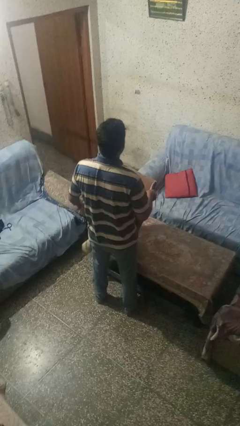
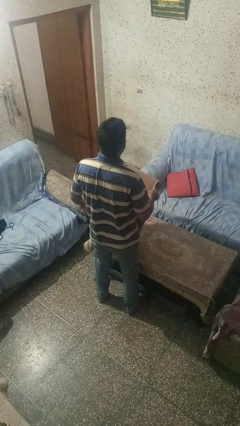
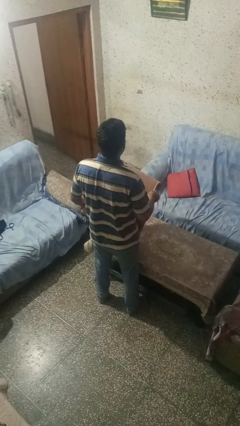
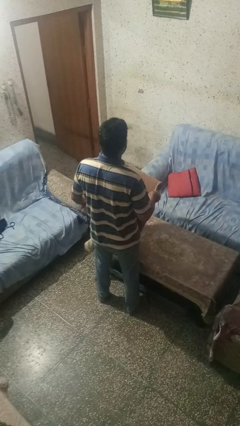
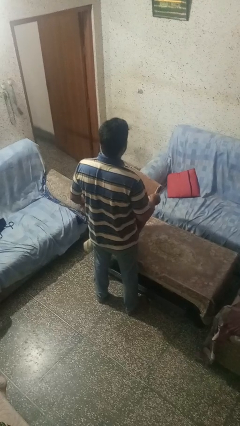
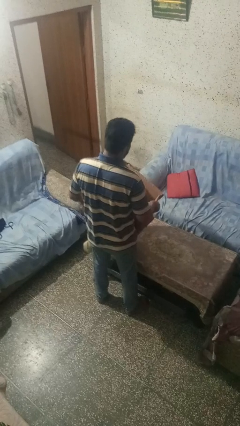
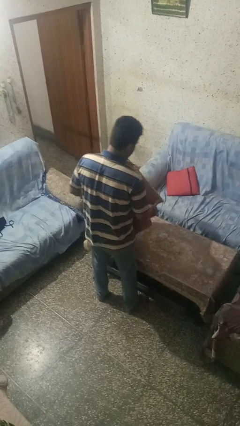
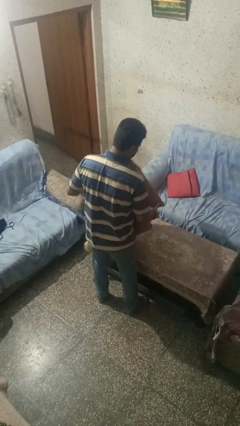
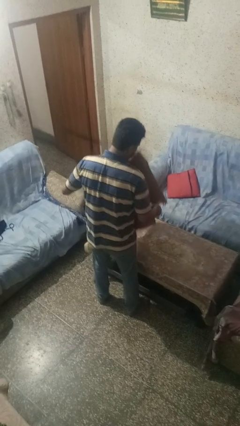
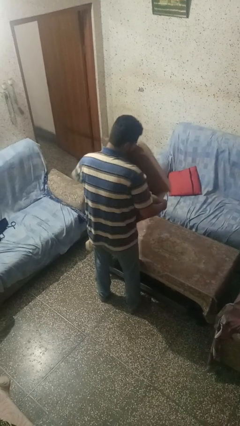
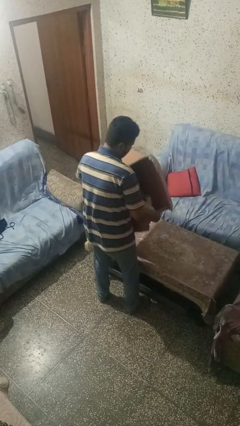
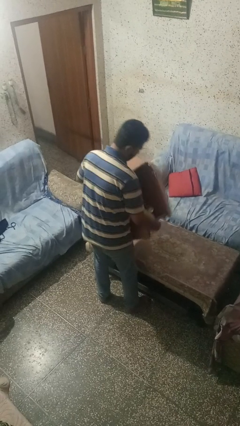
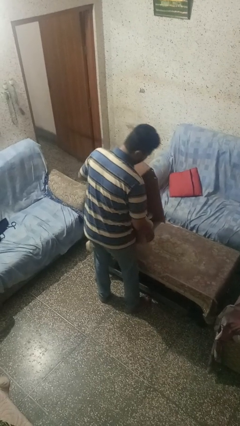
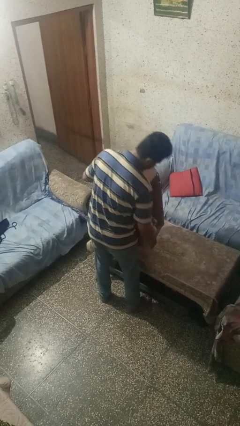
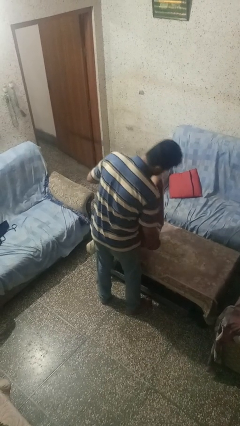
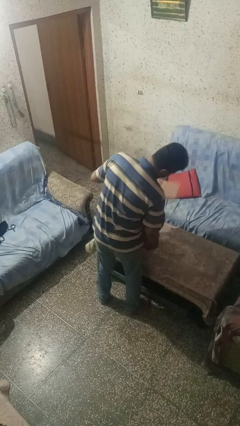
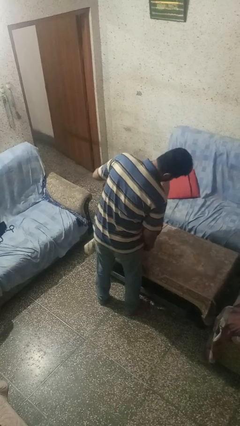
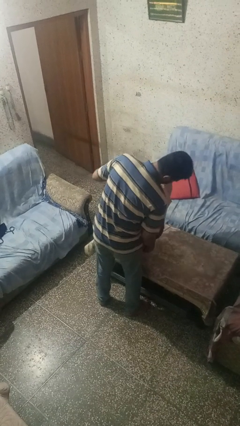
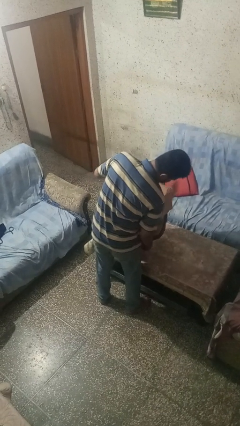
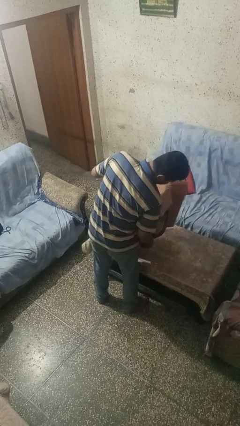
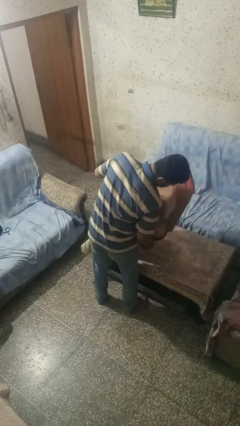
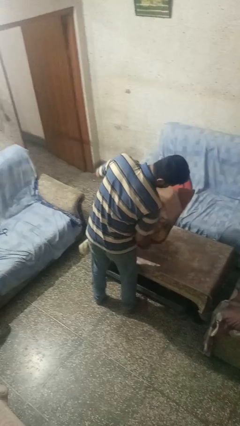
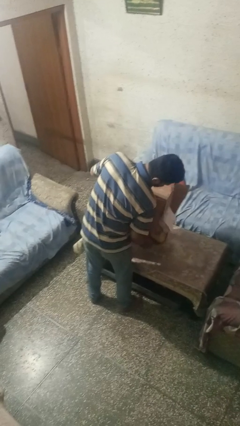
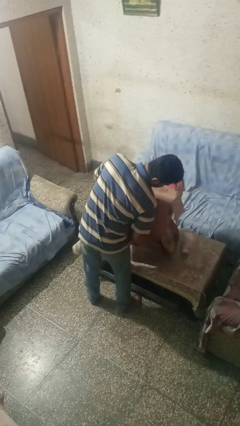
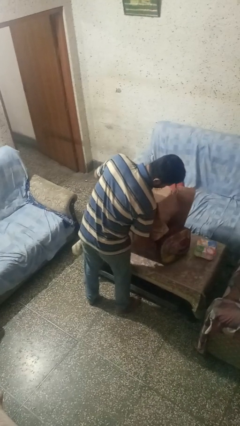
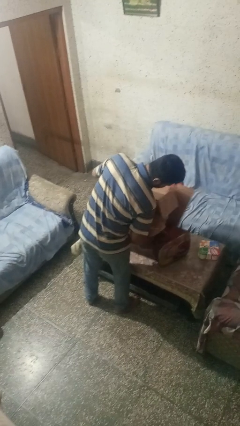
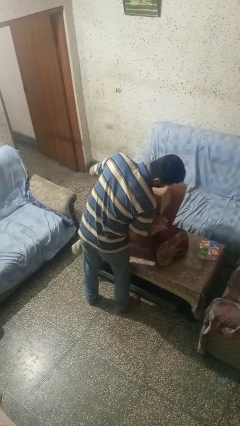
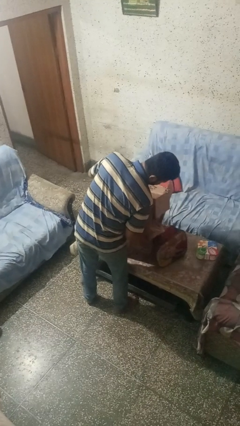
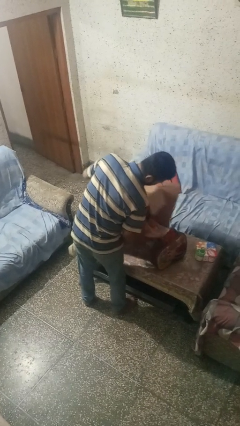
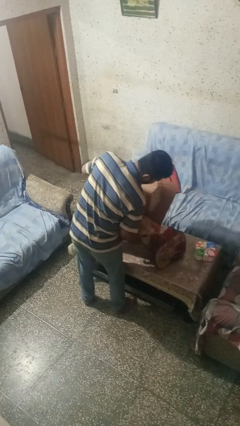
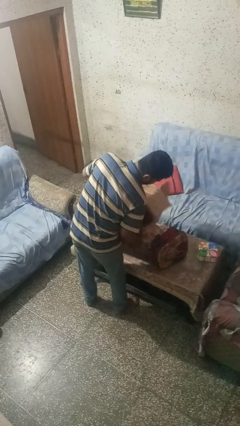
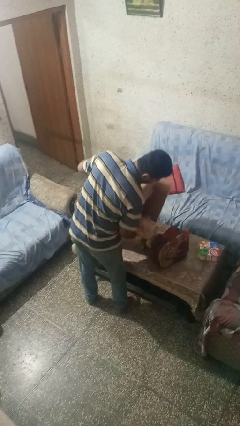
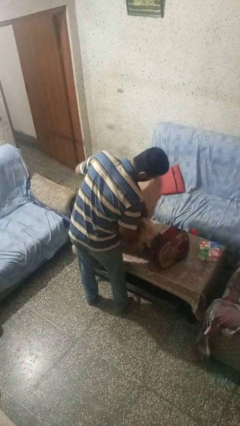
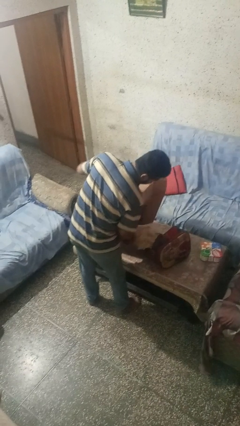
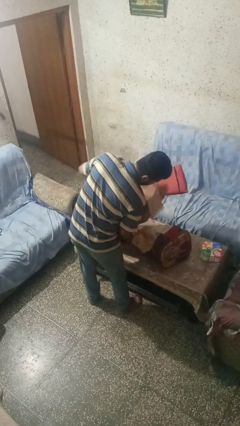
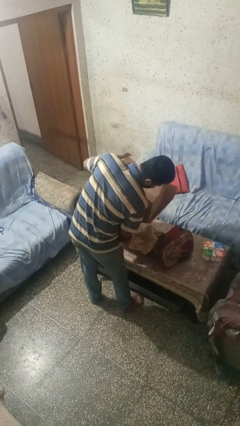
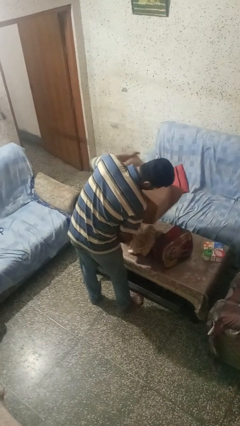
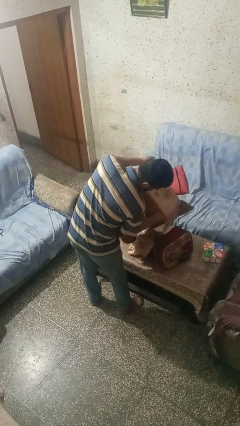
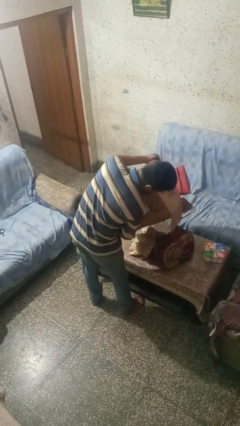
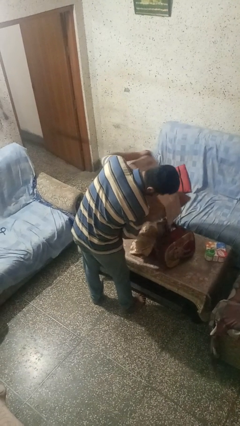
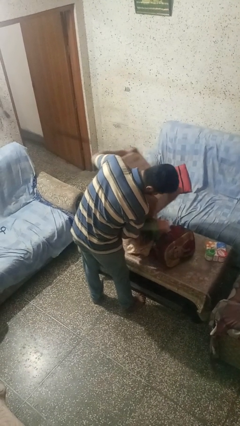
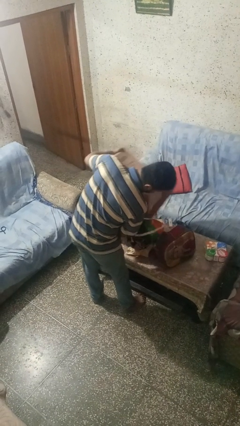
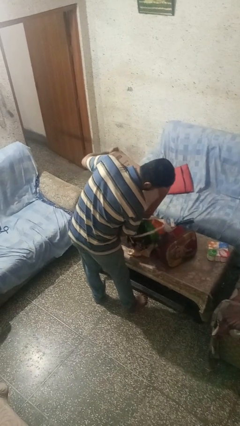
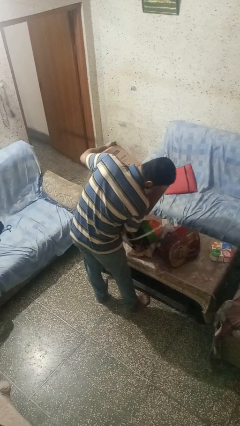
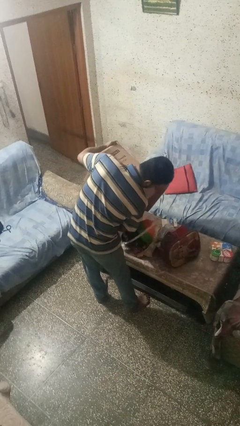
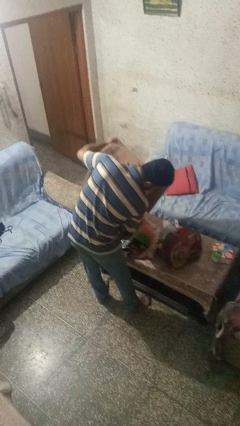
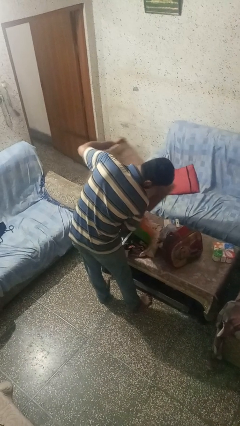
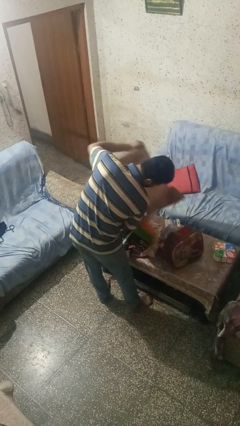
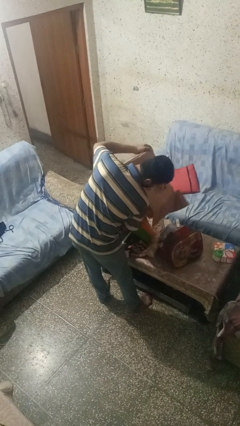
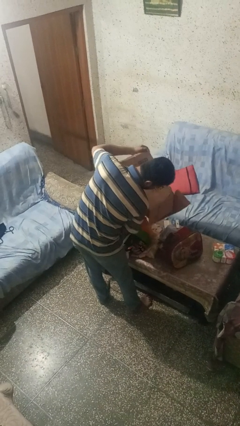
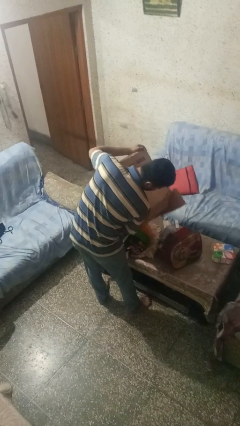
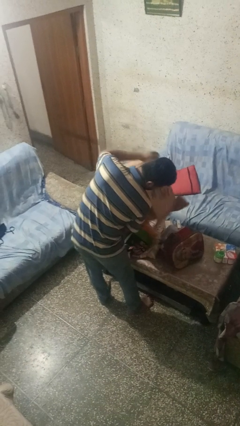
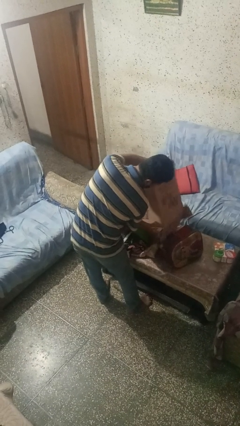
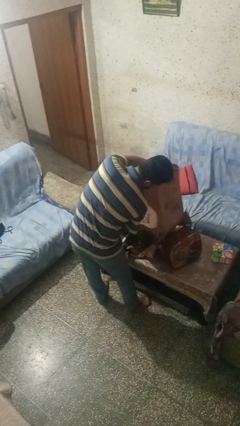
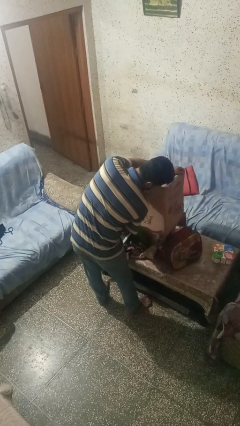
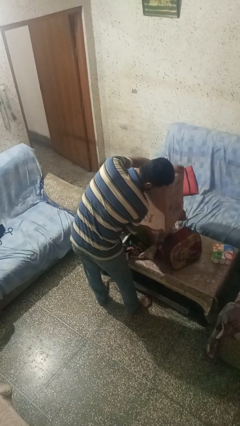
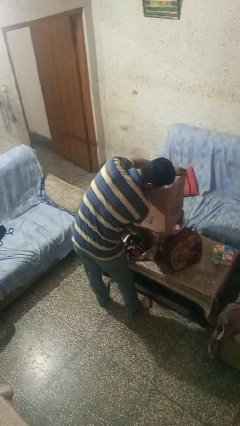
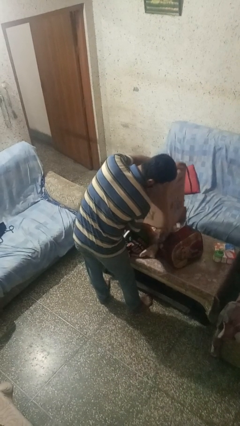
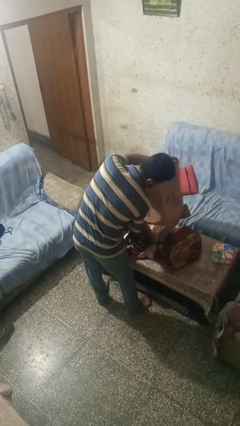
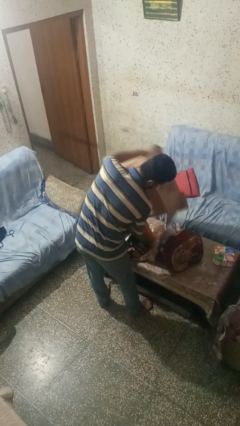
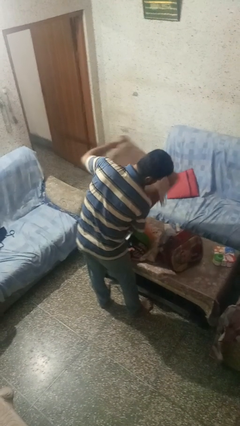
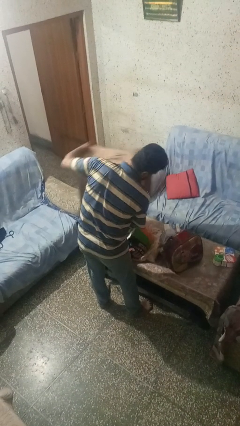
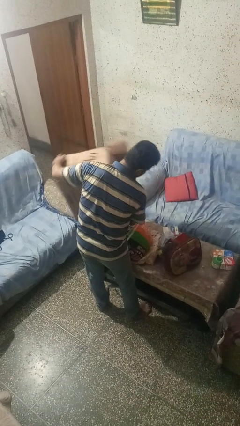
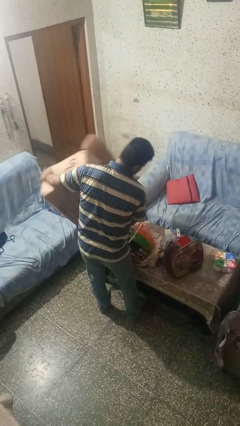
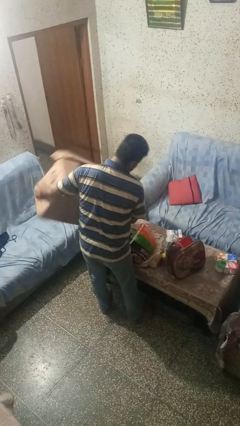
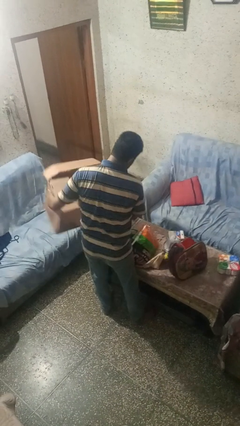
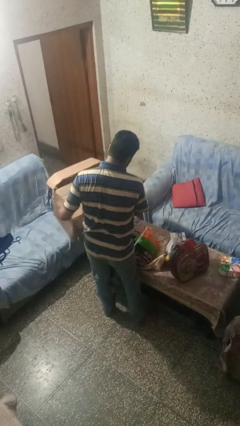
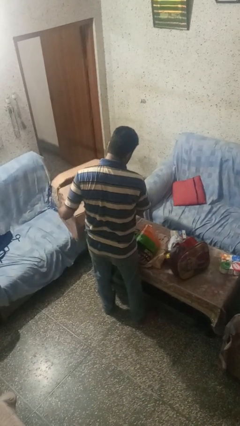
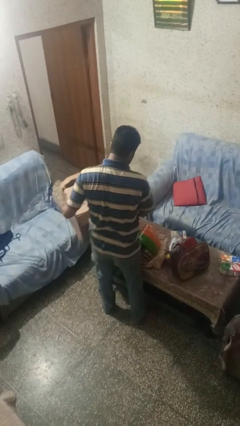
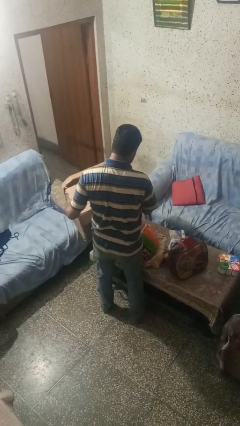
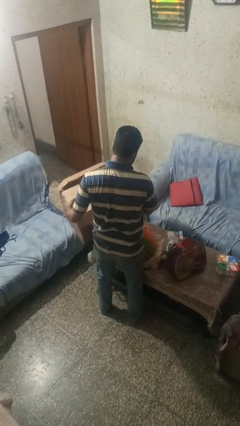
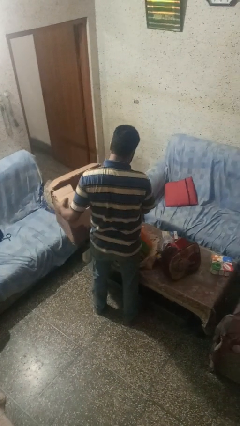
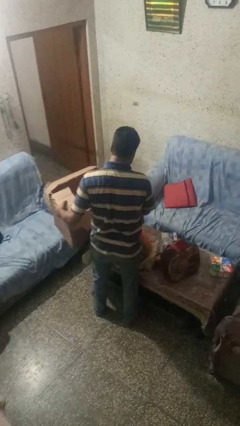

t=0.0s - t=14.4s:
person unloads box onto table

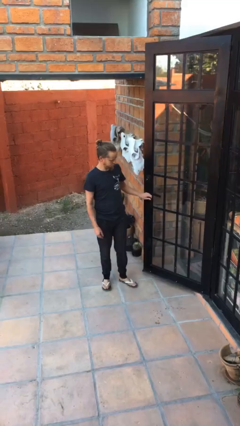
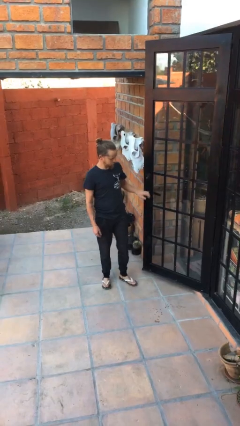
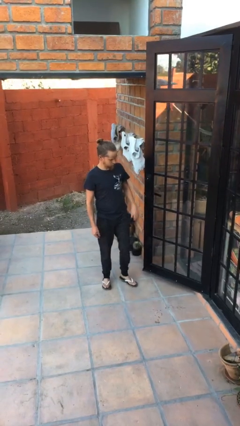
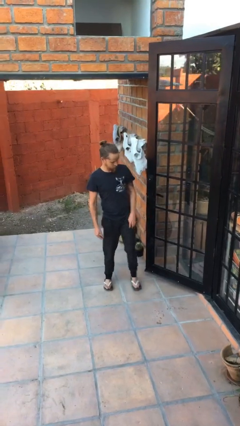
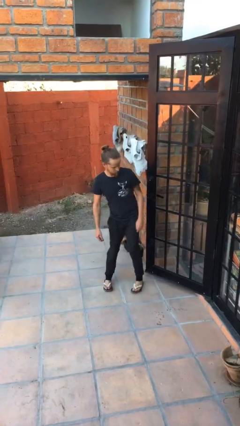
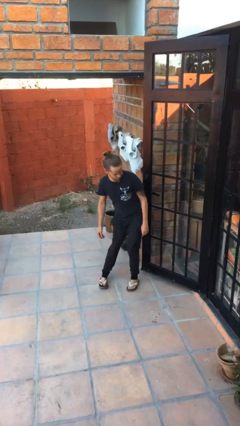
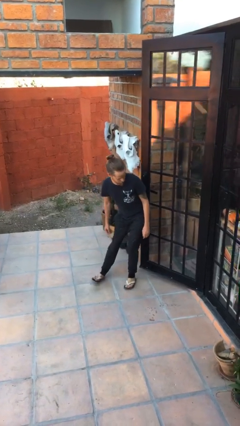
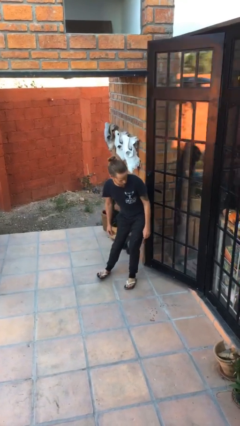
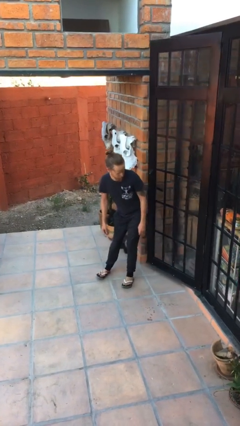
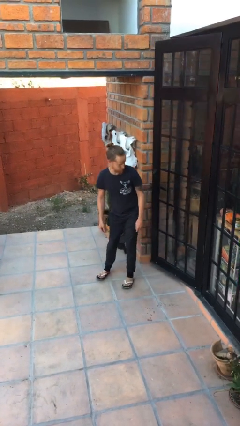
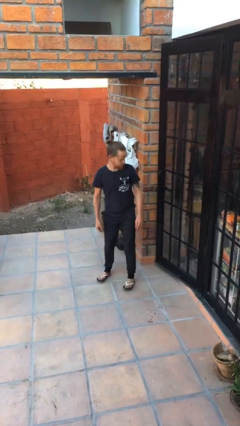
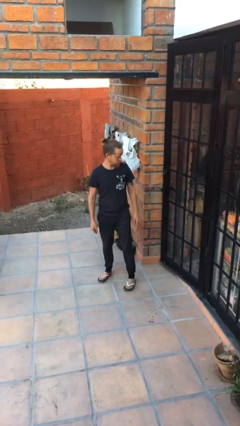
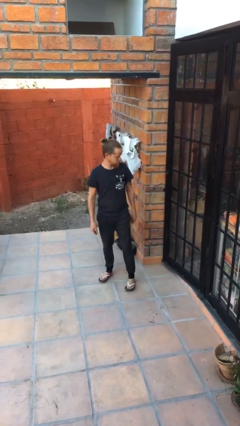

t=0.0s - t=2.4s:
person closes door with hip

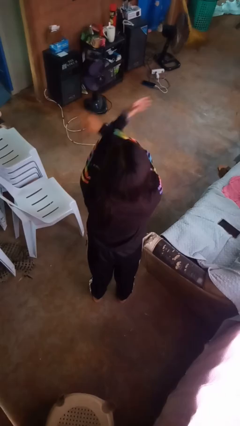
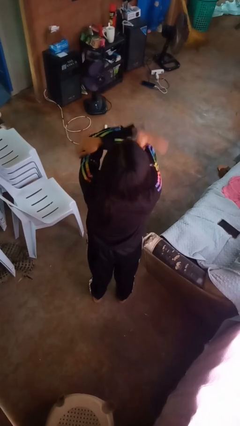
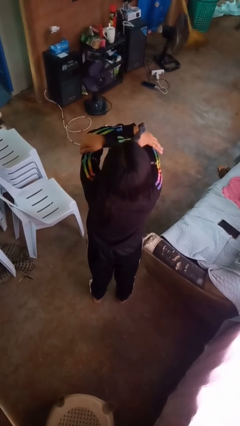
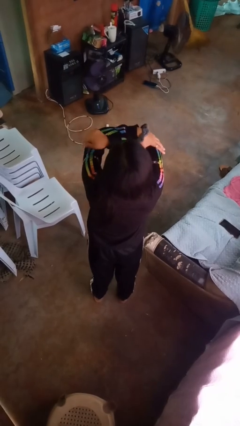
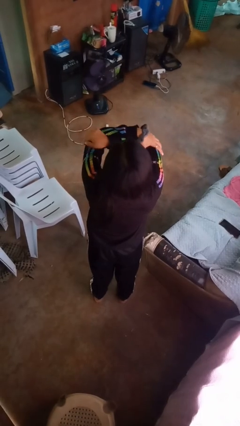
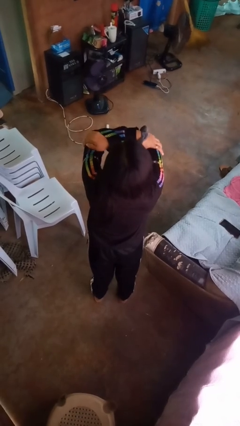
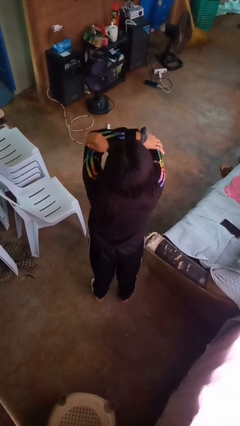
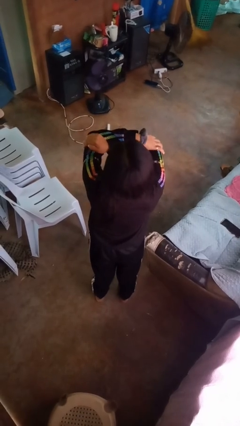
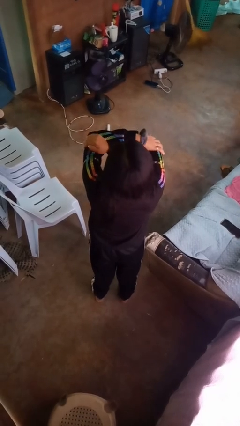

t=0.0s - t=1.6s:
person gestures arms x
